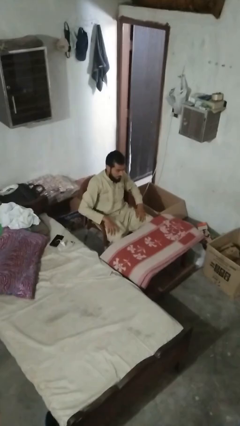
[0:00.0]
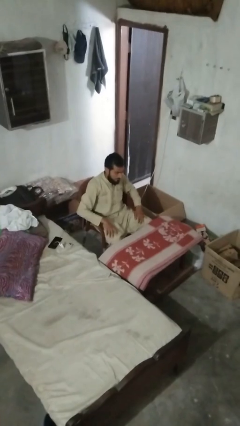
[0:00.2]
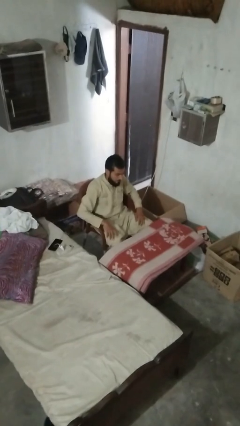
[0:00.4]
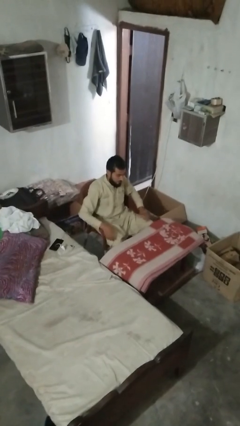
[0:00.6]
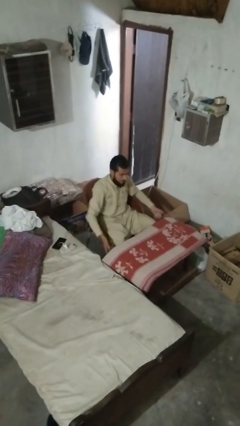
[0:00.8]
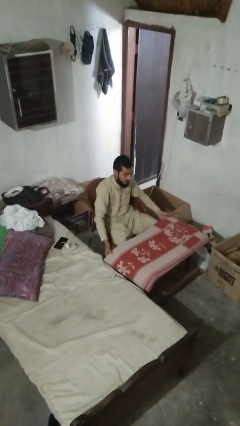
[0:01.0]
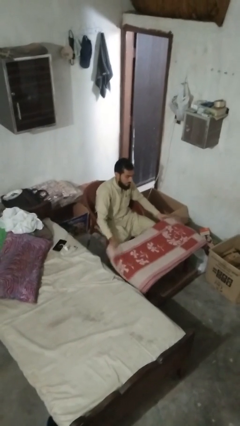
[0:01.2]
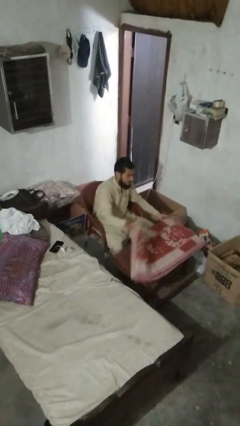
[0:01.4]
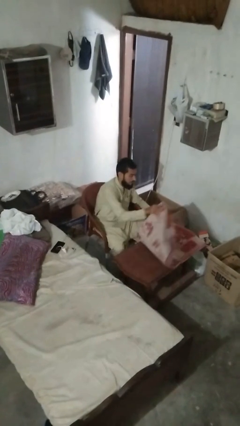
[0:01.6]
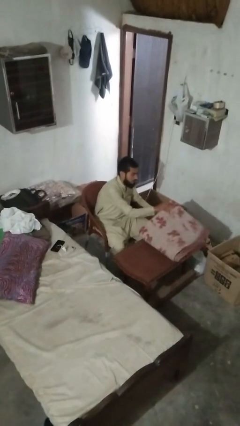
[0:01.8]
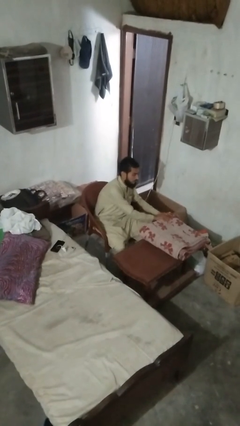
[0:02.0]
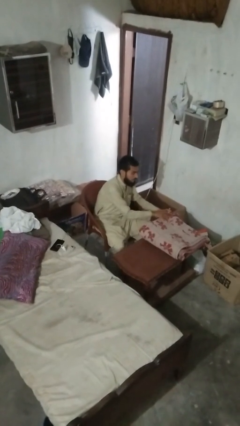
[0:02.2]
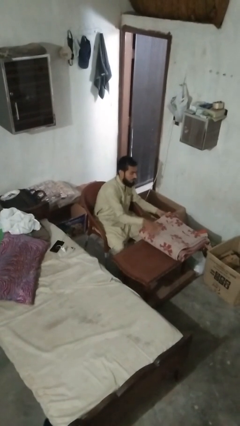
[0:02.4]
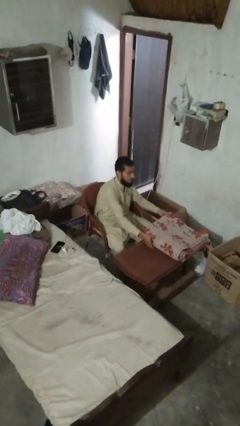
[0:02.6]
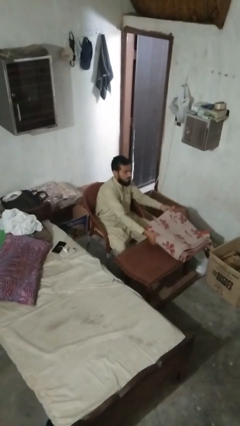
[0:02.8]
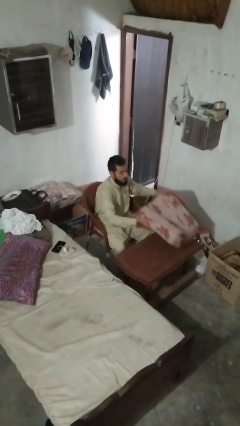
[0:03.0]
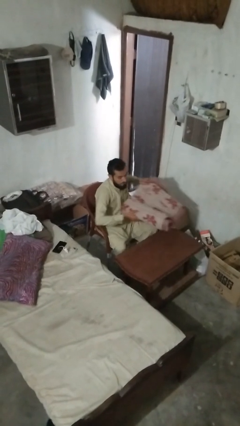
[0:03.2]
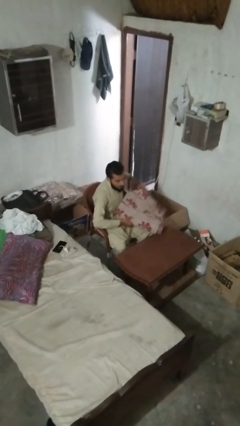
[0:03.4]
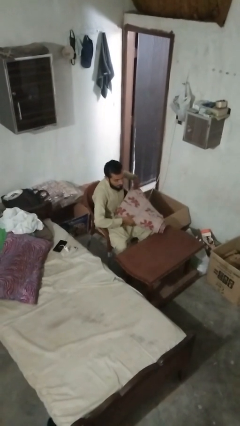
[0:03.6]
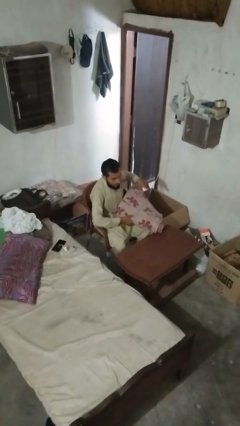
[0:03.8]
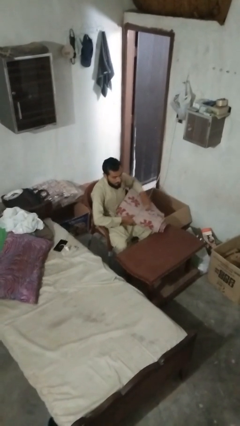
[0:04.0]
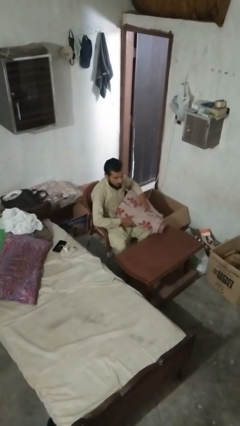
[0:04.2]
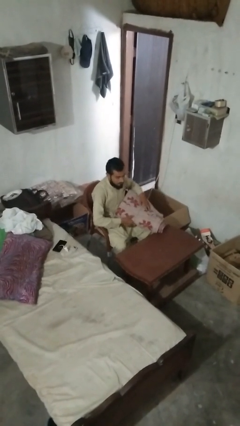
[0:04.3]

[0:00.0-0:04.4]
person folds tablecloth

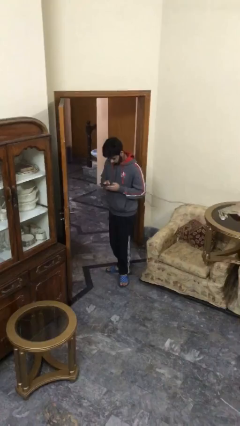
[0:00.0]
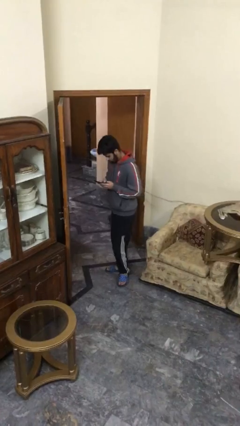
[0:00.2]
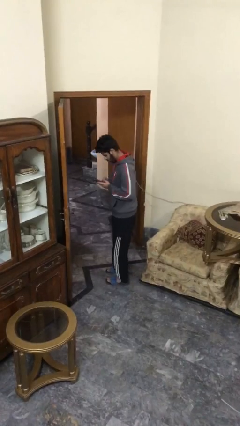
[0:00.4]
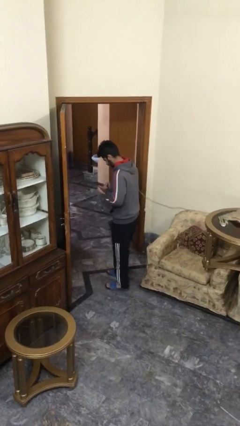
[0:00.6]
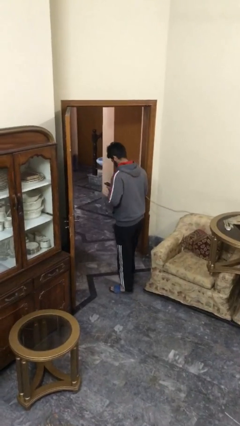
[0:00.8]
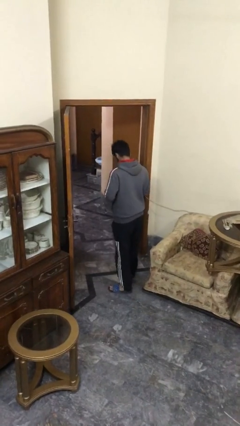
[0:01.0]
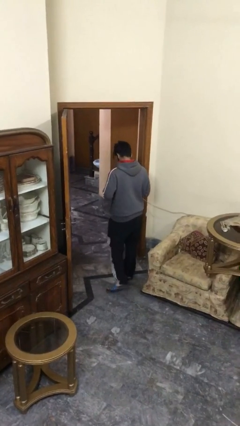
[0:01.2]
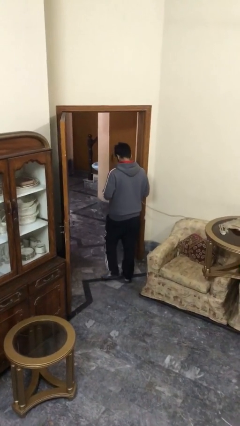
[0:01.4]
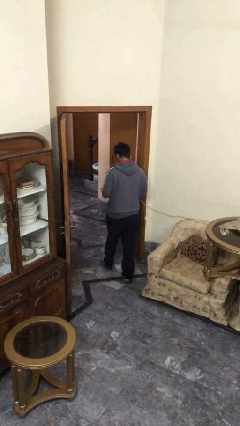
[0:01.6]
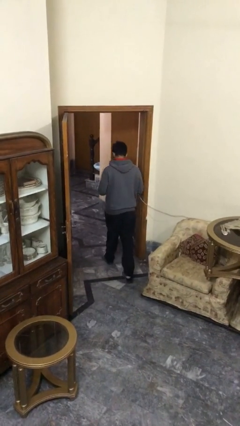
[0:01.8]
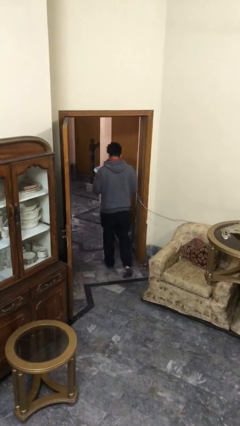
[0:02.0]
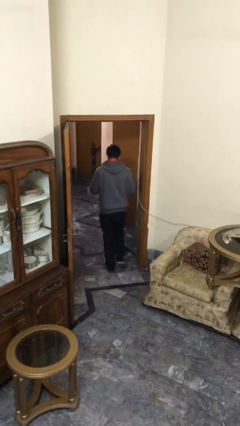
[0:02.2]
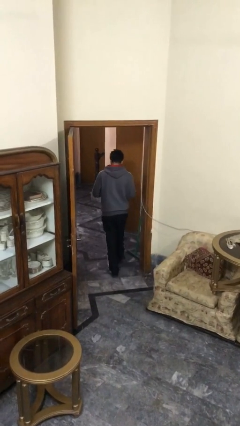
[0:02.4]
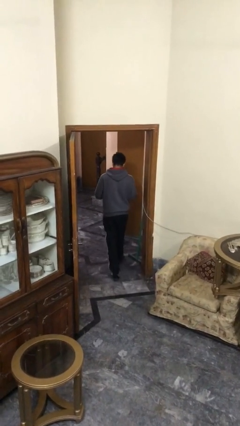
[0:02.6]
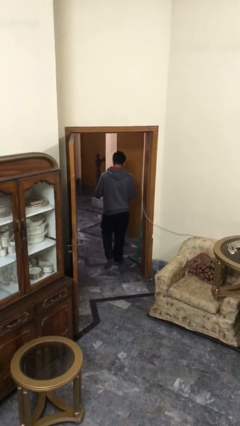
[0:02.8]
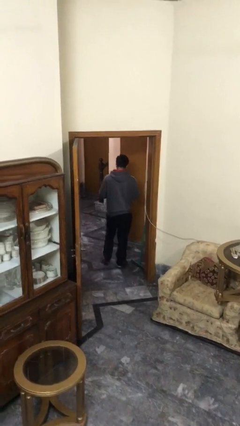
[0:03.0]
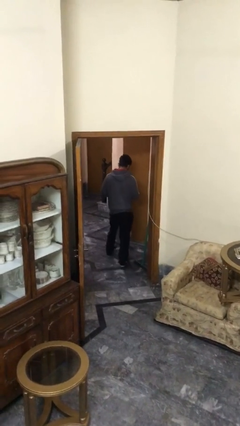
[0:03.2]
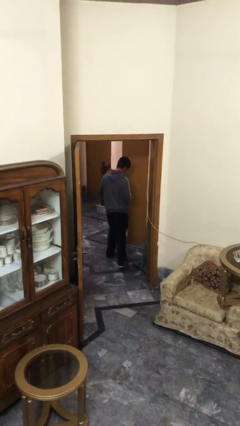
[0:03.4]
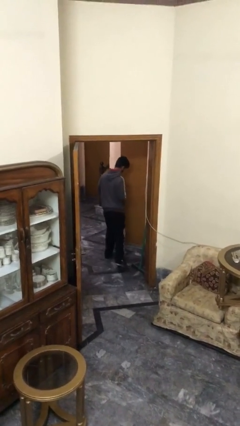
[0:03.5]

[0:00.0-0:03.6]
person exits scene through structure

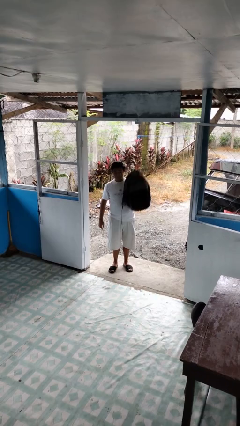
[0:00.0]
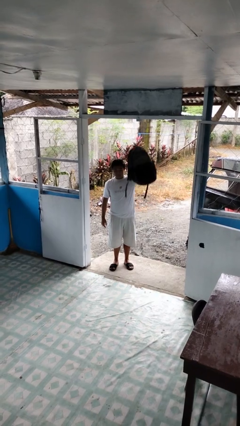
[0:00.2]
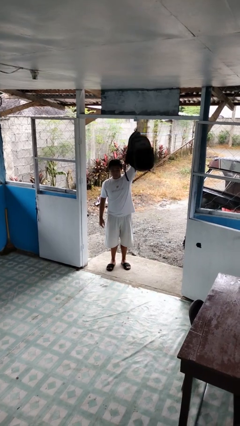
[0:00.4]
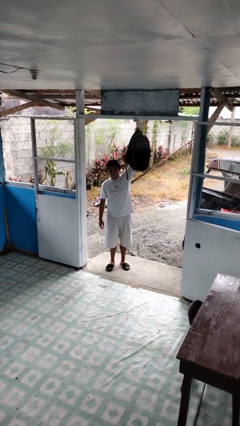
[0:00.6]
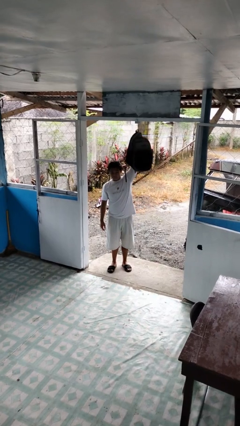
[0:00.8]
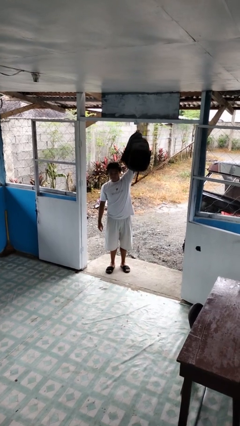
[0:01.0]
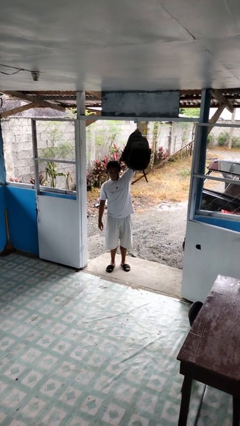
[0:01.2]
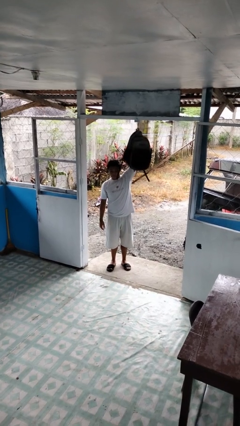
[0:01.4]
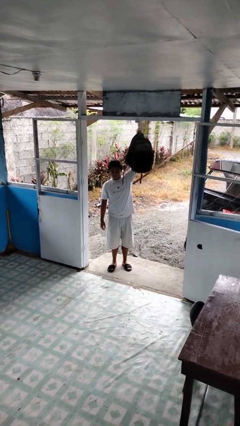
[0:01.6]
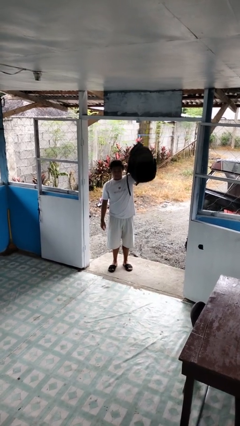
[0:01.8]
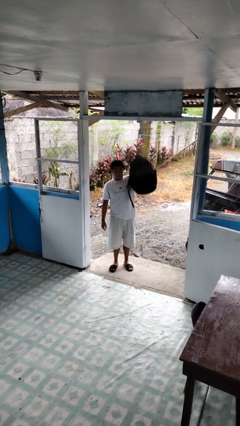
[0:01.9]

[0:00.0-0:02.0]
person holds object above head

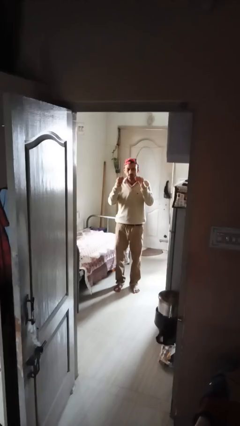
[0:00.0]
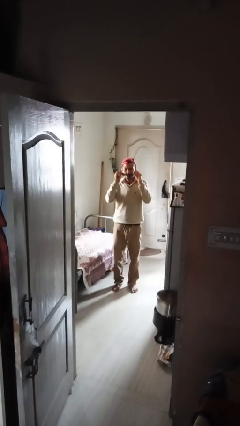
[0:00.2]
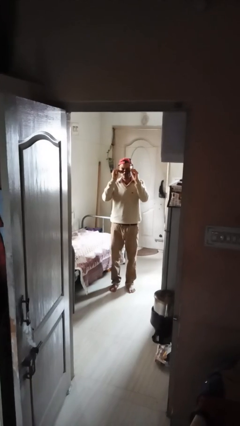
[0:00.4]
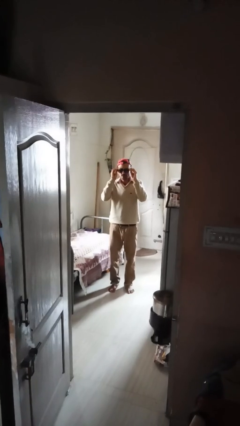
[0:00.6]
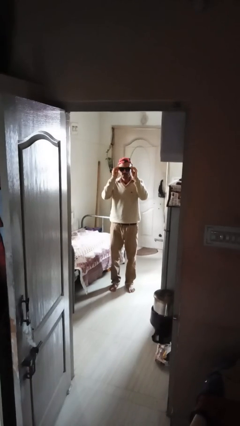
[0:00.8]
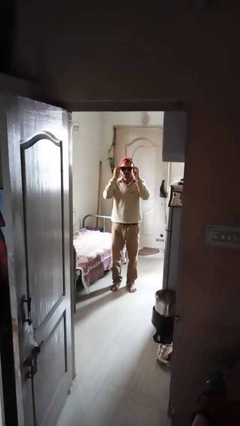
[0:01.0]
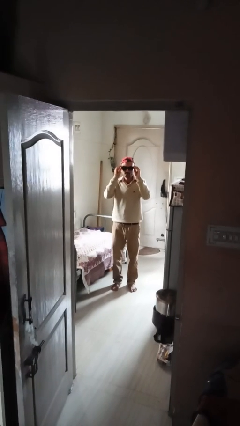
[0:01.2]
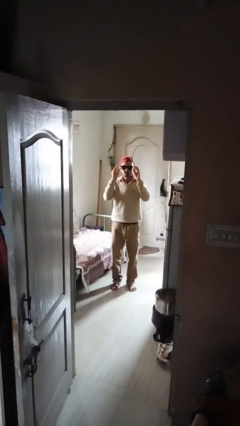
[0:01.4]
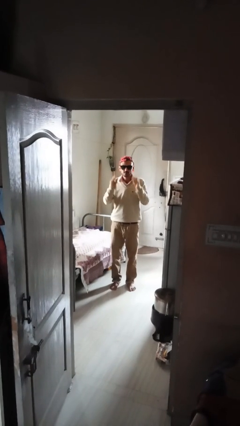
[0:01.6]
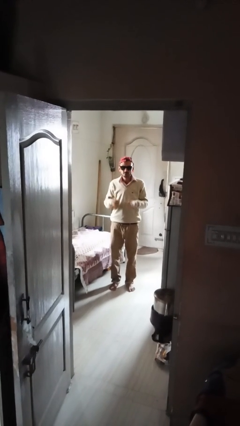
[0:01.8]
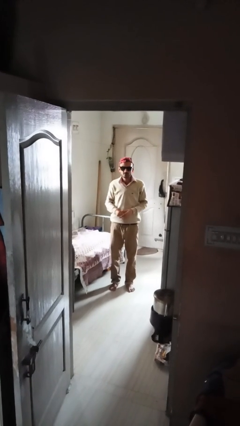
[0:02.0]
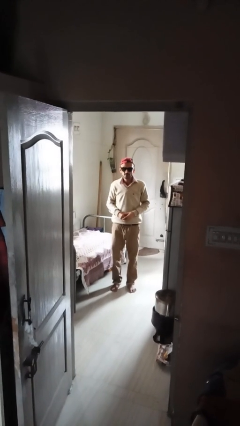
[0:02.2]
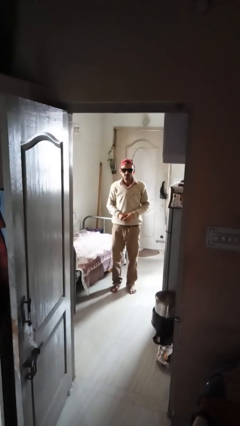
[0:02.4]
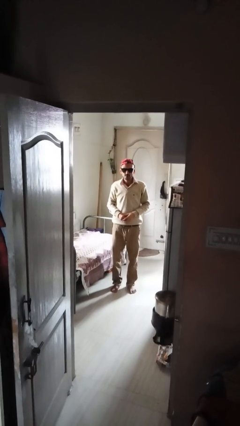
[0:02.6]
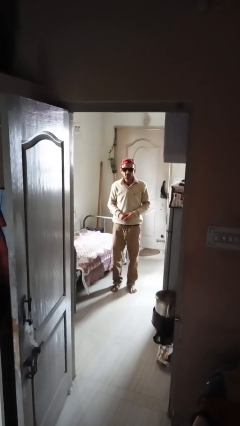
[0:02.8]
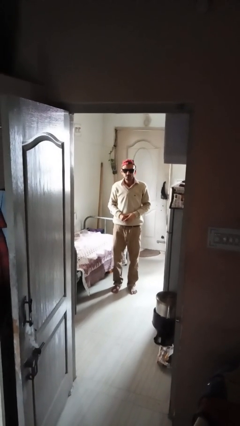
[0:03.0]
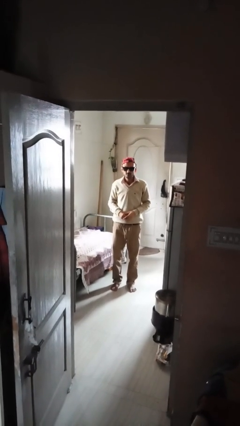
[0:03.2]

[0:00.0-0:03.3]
person puts on sunglasses

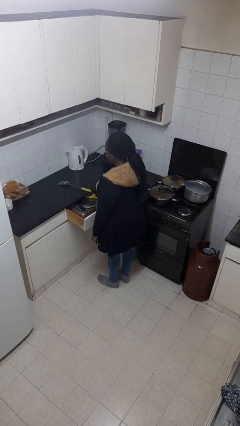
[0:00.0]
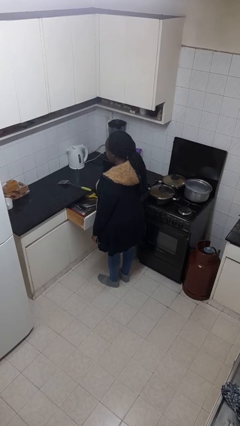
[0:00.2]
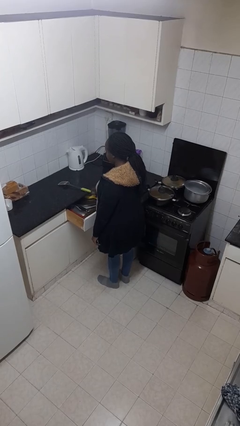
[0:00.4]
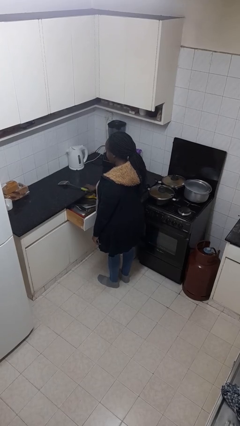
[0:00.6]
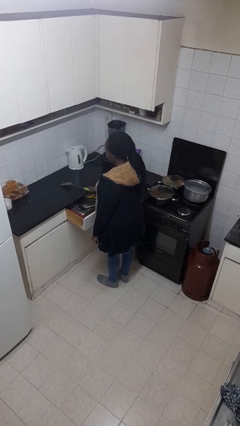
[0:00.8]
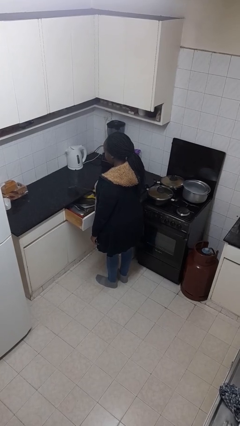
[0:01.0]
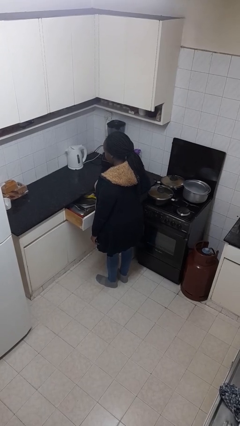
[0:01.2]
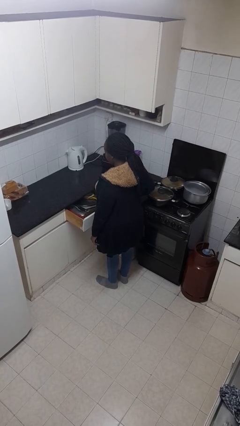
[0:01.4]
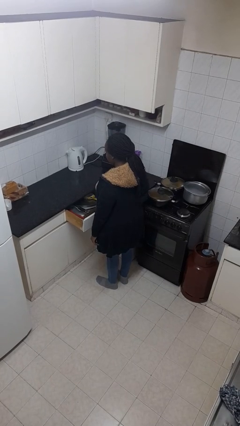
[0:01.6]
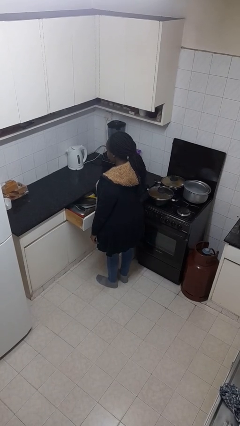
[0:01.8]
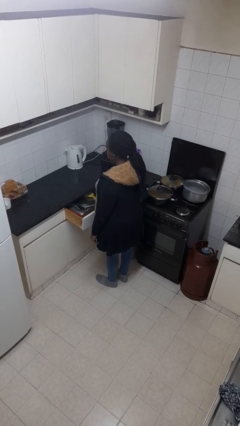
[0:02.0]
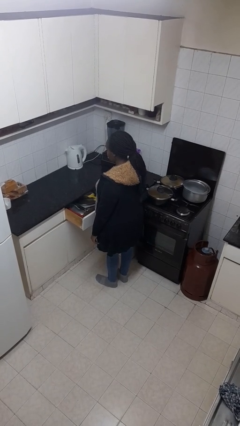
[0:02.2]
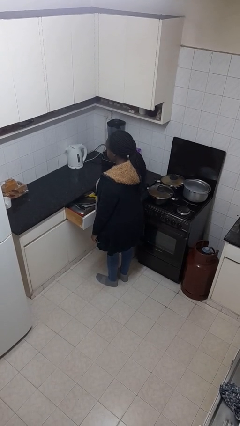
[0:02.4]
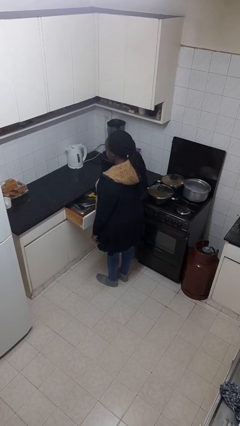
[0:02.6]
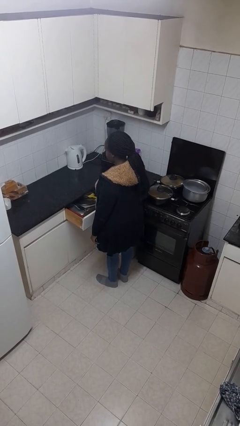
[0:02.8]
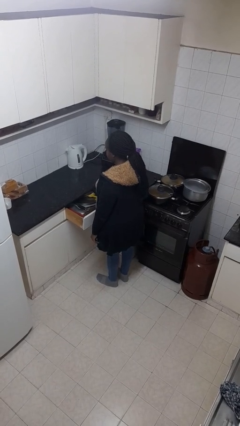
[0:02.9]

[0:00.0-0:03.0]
person puts object into kitchen drawer

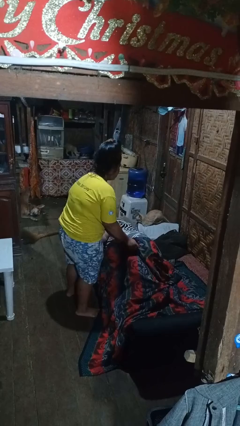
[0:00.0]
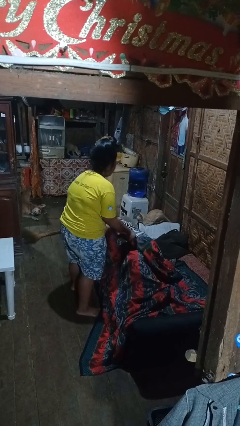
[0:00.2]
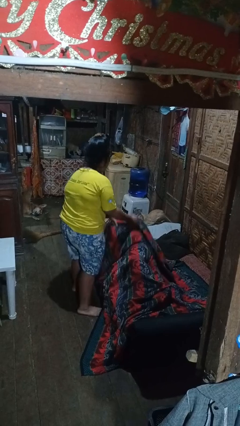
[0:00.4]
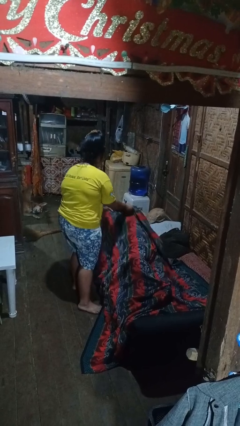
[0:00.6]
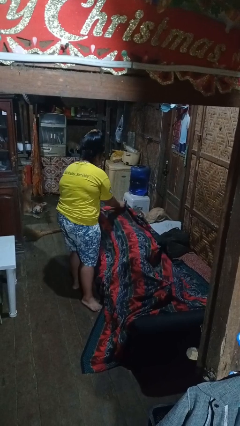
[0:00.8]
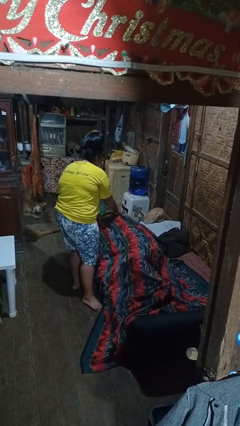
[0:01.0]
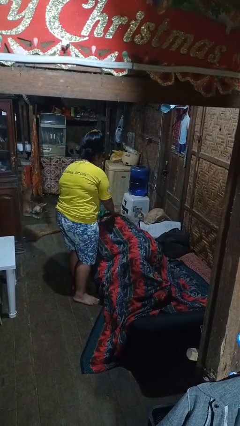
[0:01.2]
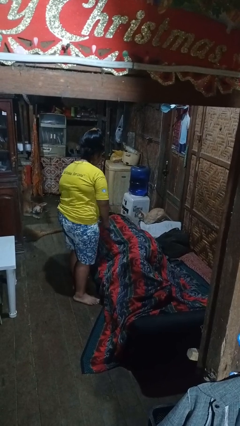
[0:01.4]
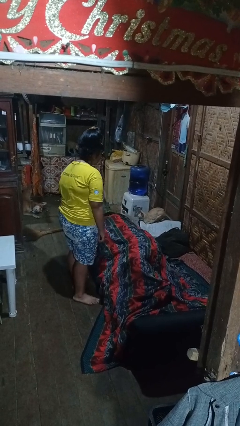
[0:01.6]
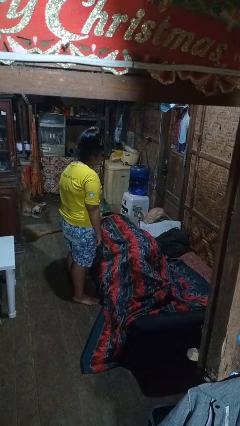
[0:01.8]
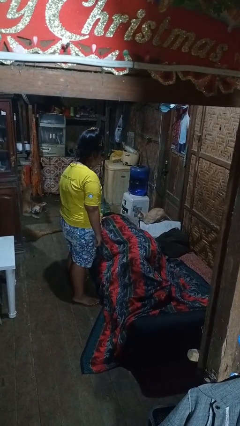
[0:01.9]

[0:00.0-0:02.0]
person covers friend with blanket
